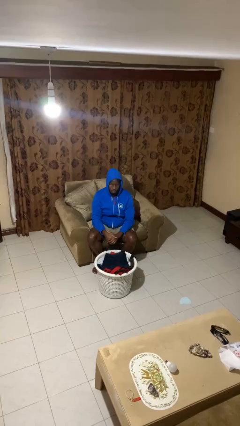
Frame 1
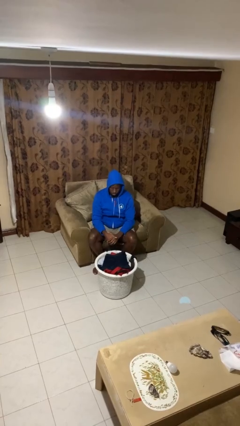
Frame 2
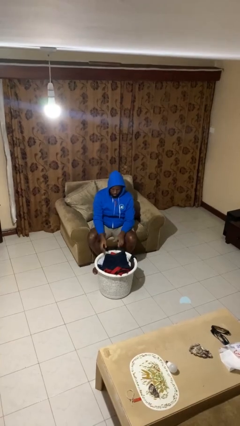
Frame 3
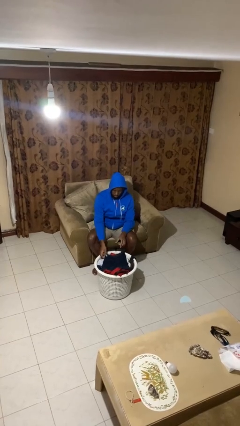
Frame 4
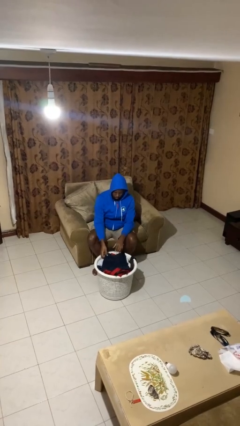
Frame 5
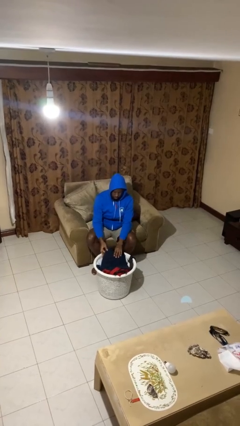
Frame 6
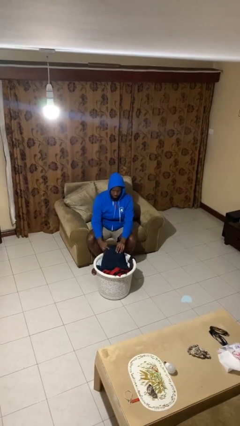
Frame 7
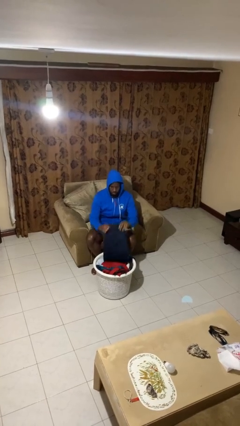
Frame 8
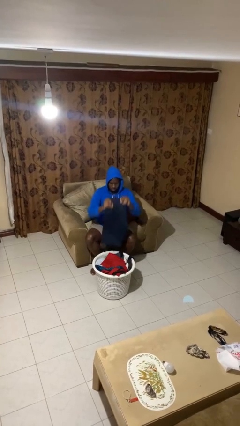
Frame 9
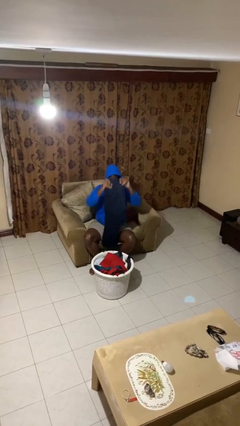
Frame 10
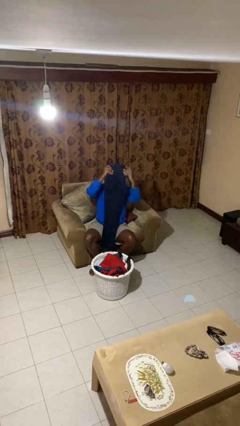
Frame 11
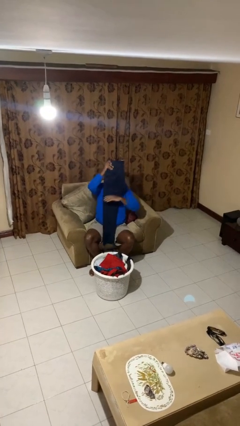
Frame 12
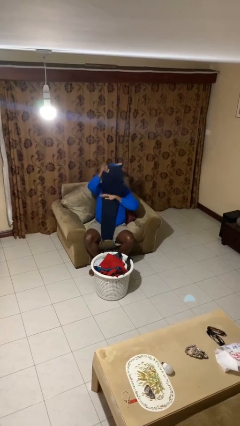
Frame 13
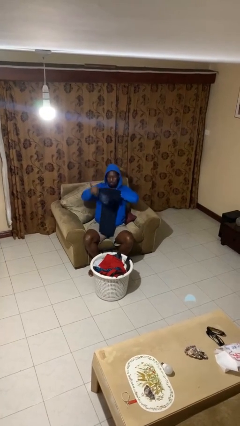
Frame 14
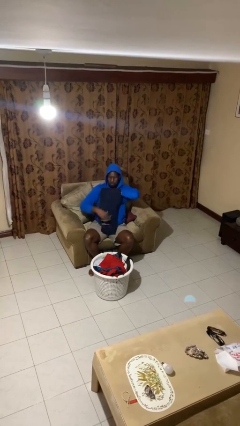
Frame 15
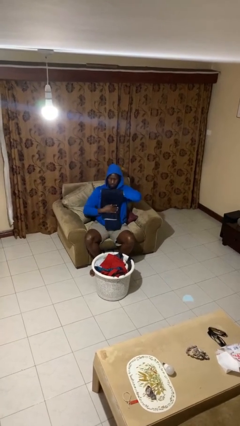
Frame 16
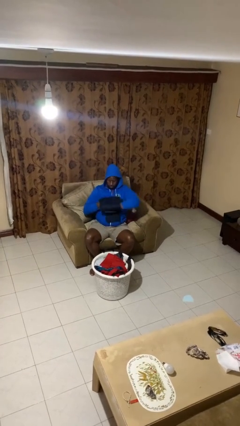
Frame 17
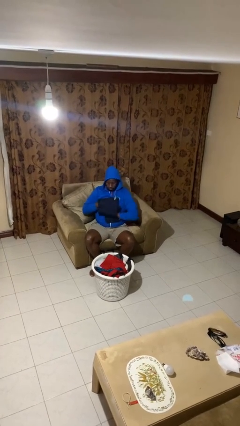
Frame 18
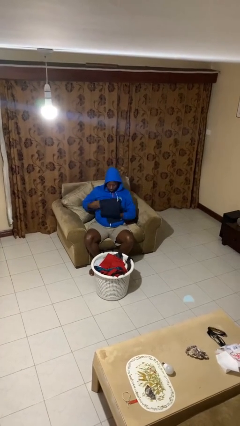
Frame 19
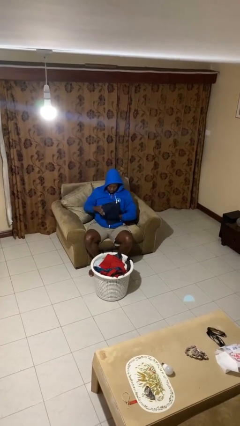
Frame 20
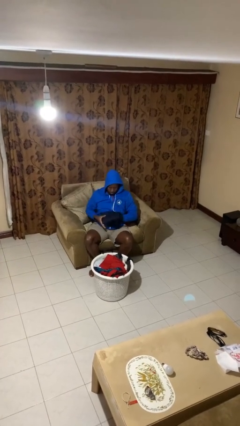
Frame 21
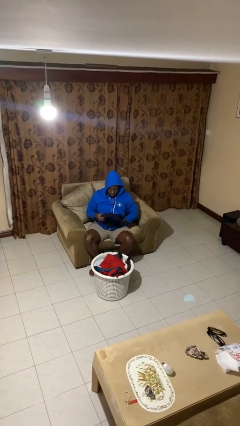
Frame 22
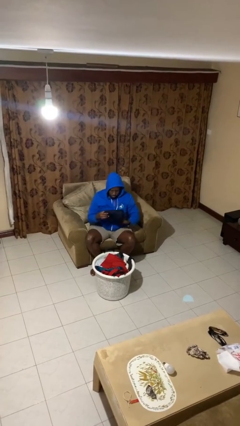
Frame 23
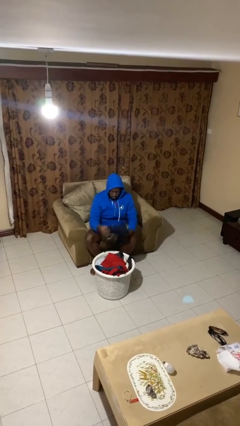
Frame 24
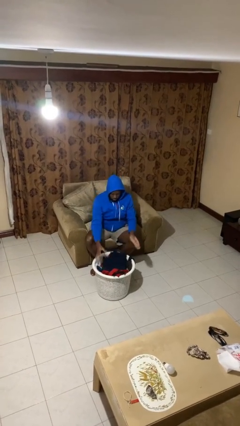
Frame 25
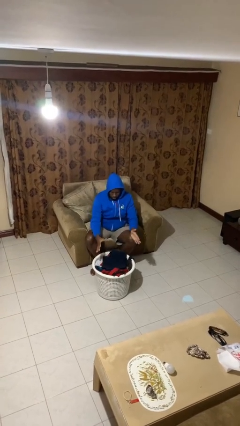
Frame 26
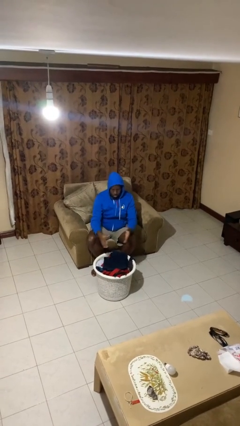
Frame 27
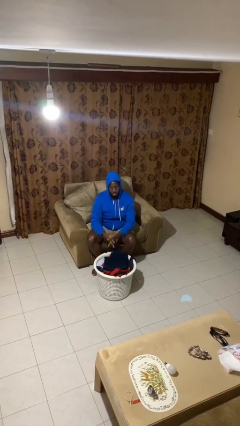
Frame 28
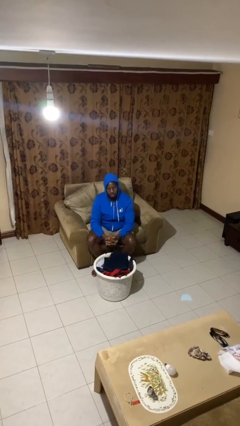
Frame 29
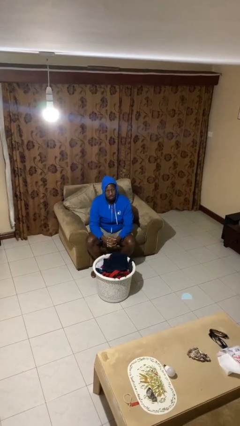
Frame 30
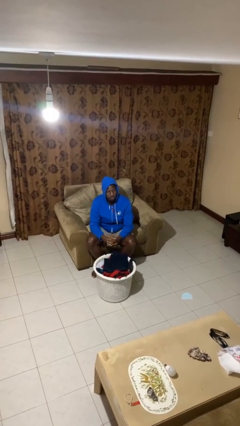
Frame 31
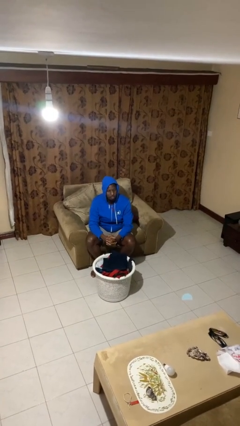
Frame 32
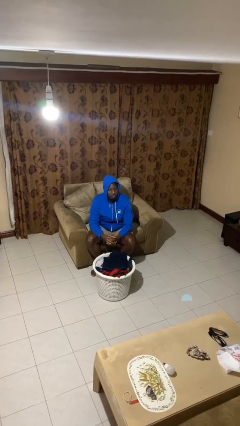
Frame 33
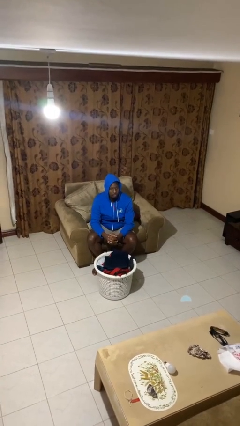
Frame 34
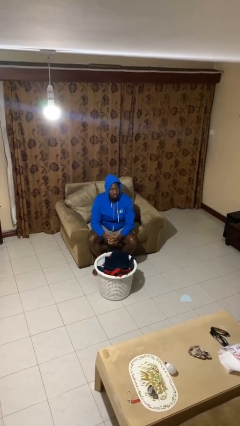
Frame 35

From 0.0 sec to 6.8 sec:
person folds pants

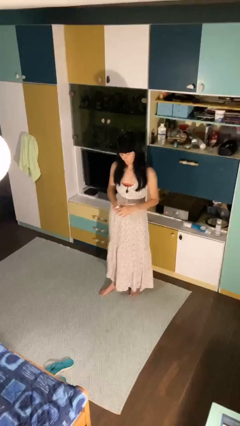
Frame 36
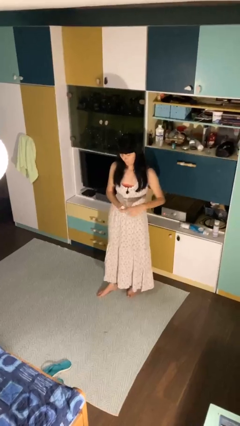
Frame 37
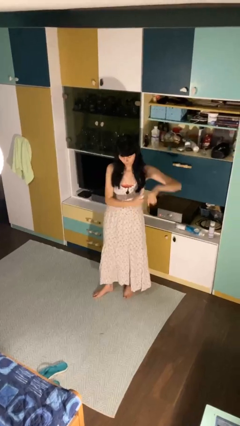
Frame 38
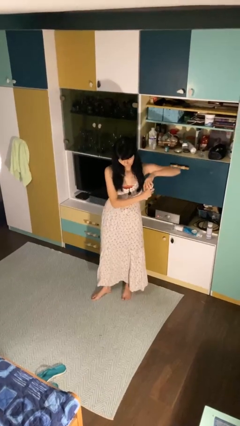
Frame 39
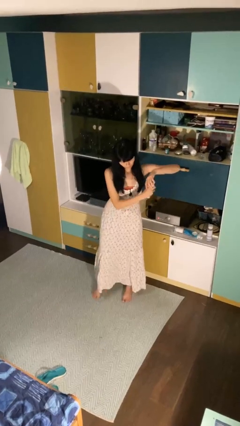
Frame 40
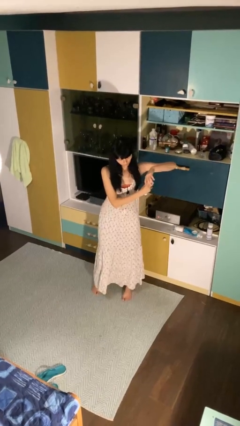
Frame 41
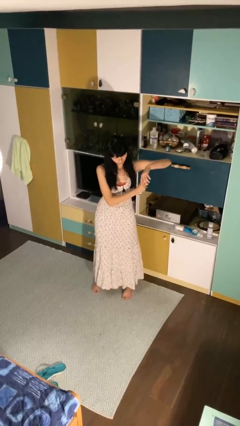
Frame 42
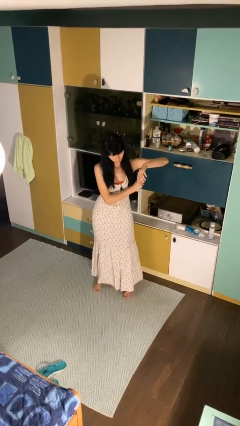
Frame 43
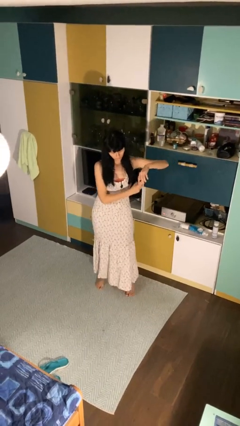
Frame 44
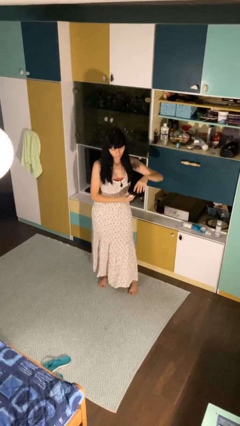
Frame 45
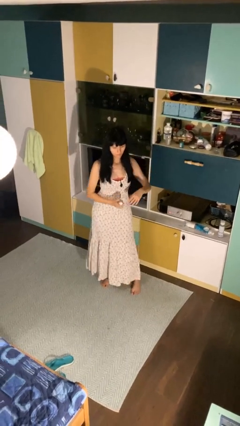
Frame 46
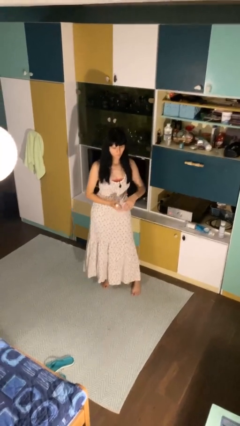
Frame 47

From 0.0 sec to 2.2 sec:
person applies deodorant

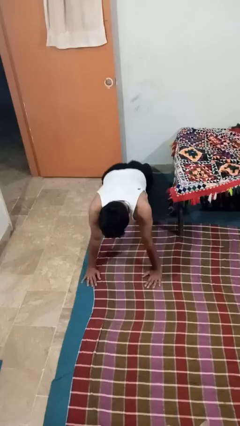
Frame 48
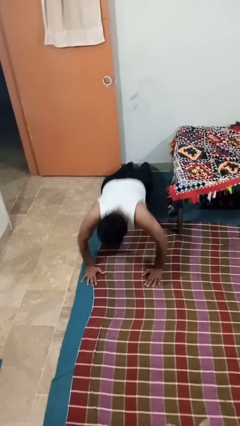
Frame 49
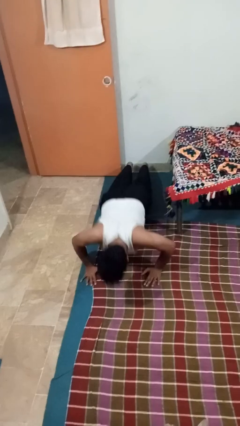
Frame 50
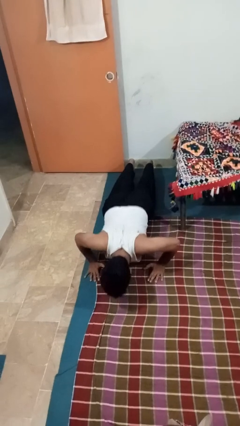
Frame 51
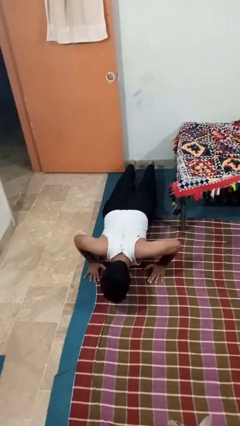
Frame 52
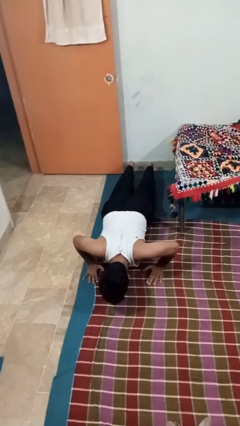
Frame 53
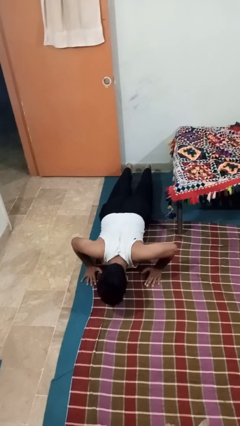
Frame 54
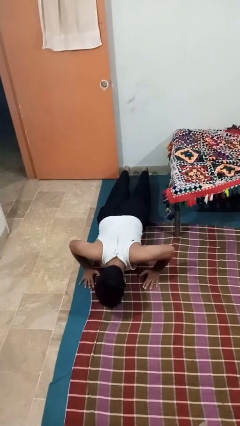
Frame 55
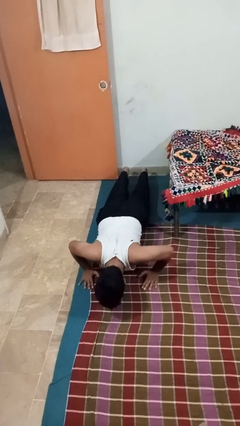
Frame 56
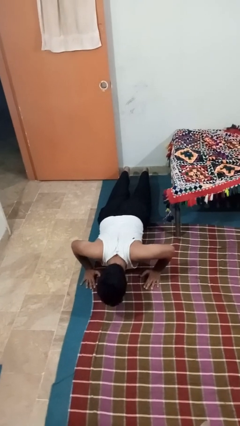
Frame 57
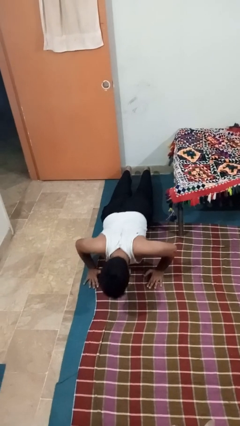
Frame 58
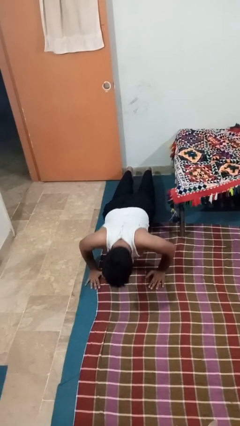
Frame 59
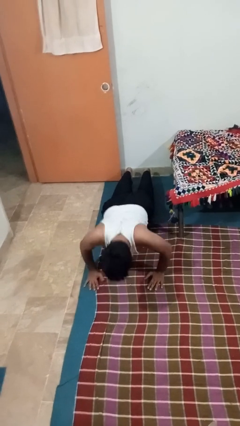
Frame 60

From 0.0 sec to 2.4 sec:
person exercises with pushup

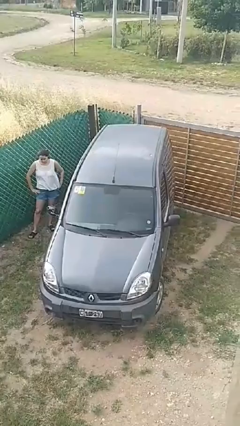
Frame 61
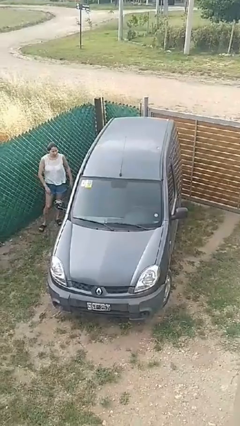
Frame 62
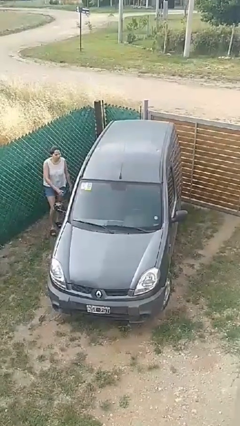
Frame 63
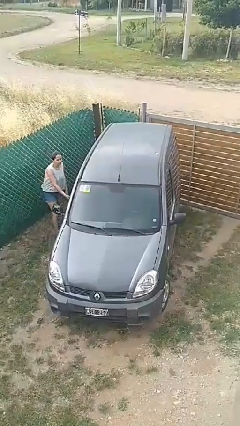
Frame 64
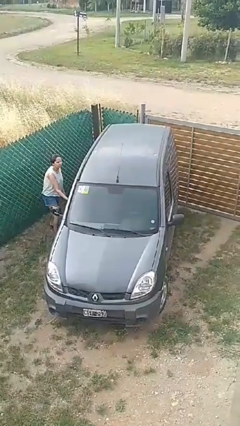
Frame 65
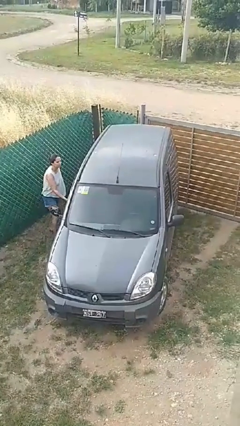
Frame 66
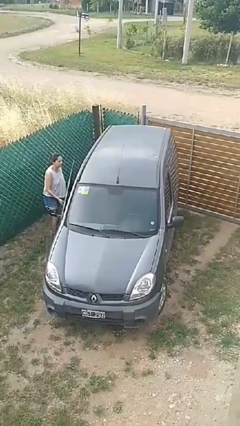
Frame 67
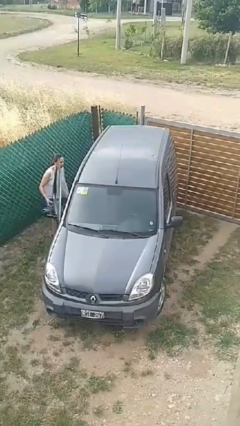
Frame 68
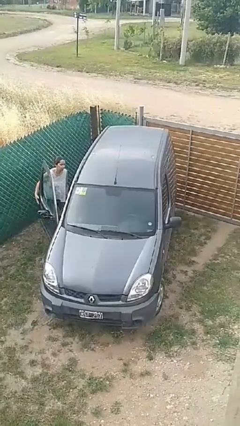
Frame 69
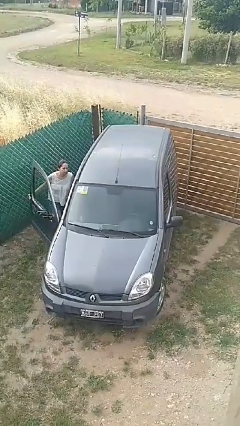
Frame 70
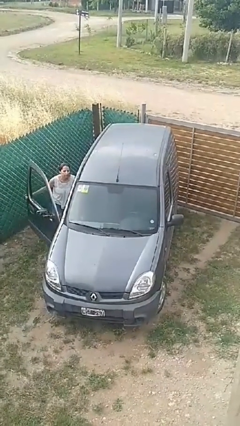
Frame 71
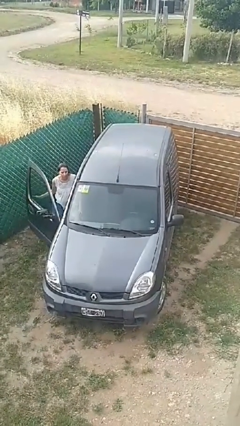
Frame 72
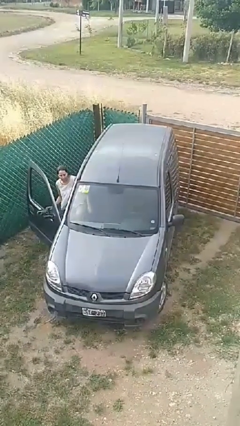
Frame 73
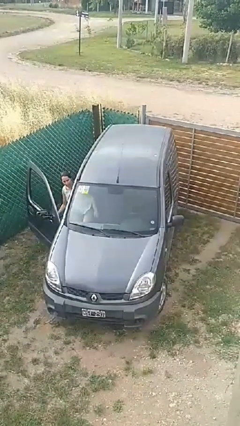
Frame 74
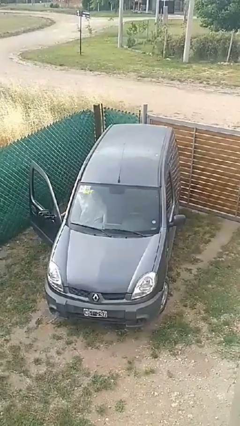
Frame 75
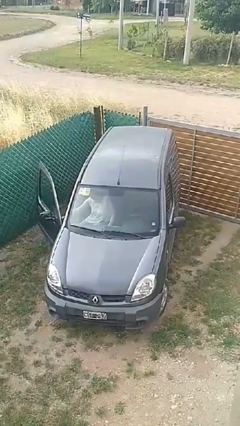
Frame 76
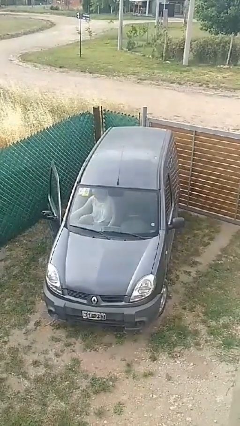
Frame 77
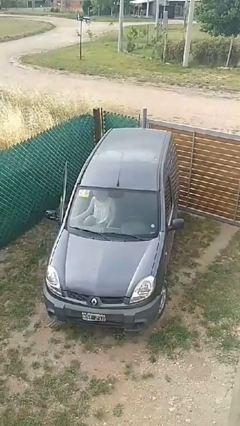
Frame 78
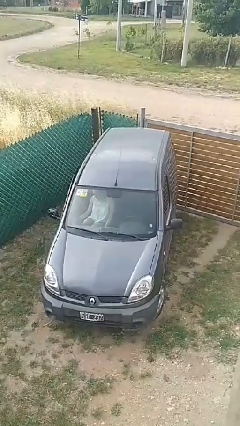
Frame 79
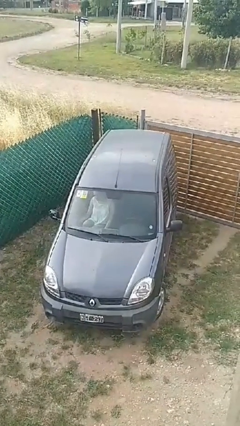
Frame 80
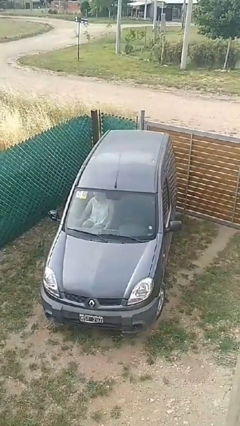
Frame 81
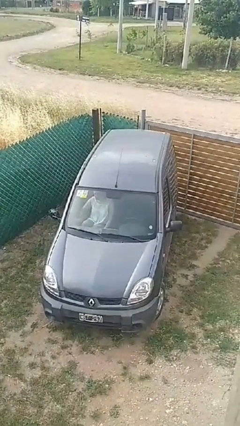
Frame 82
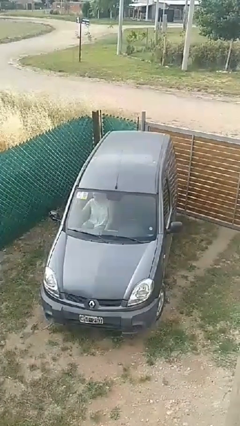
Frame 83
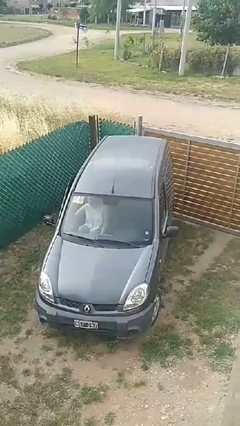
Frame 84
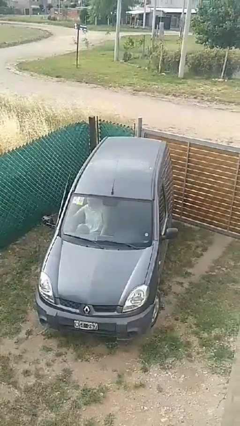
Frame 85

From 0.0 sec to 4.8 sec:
car picks up person

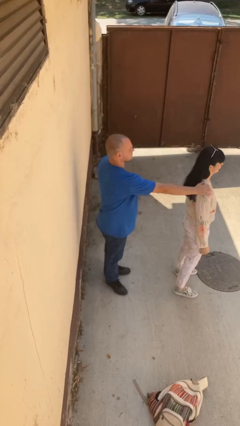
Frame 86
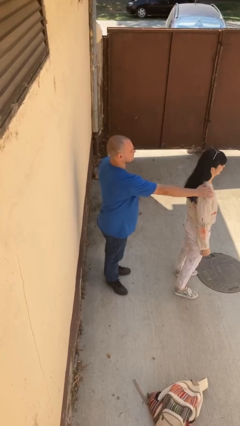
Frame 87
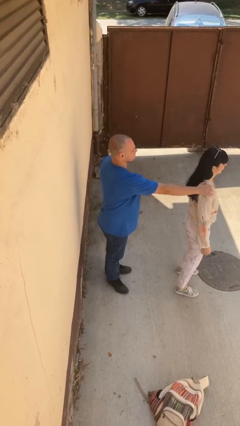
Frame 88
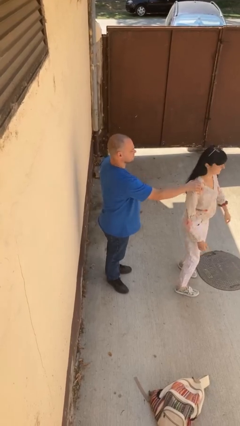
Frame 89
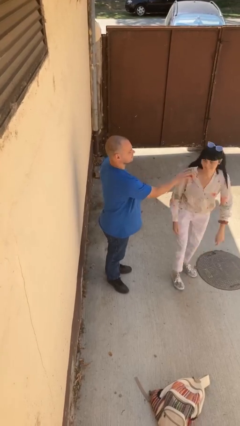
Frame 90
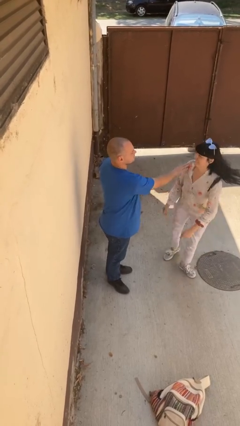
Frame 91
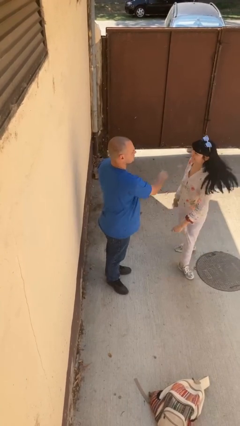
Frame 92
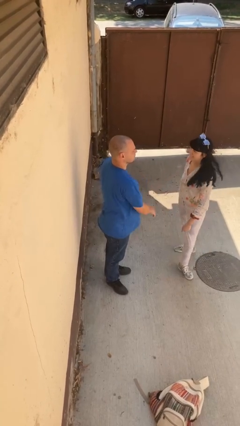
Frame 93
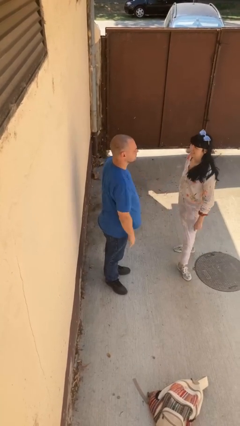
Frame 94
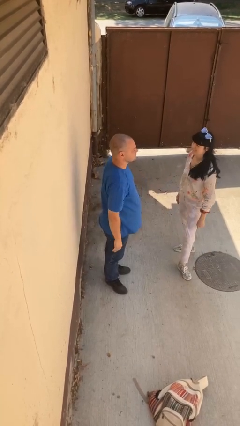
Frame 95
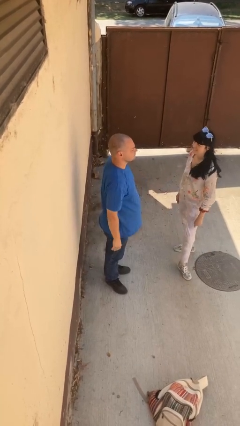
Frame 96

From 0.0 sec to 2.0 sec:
person spins person around
